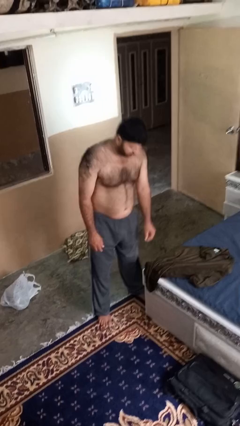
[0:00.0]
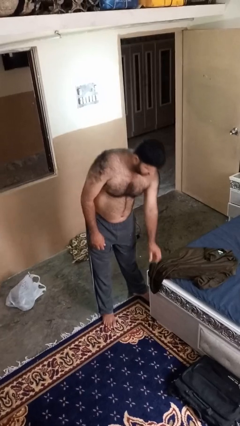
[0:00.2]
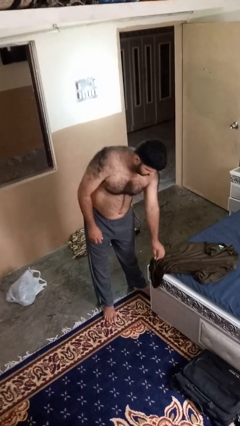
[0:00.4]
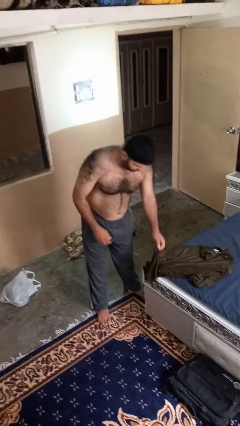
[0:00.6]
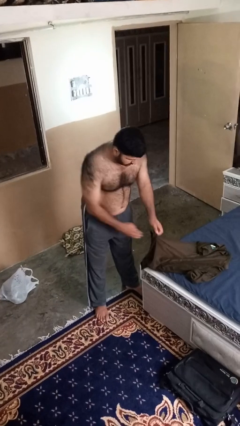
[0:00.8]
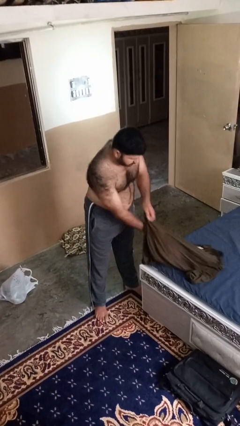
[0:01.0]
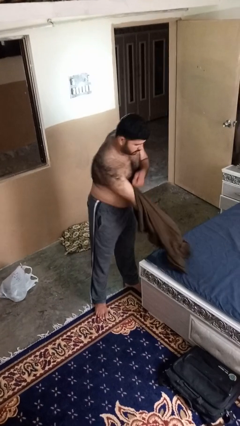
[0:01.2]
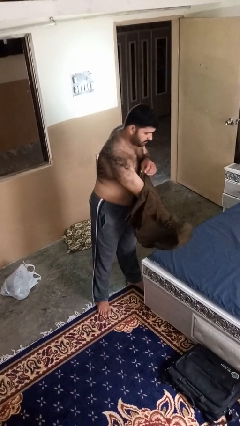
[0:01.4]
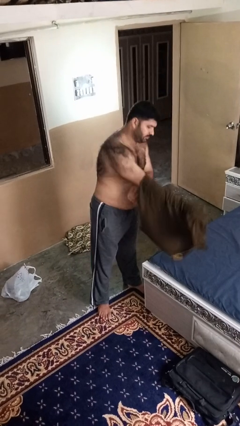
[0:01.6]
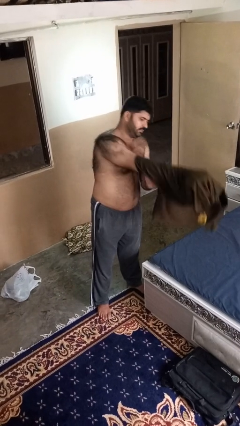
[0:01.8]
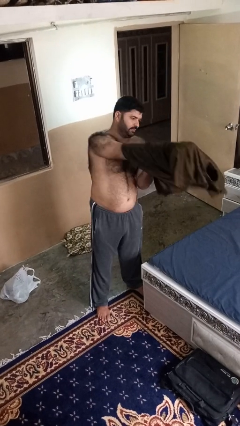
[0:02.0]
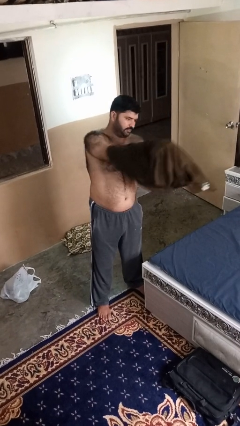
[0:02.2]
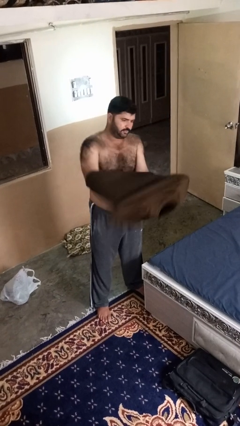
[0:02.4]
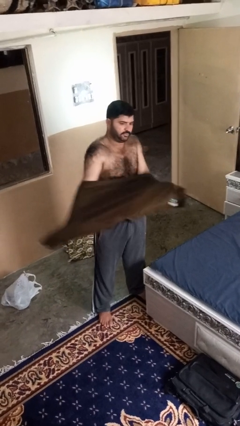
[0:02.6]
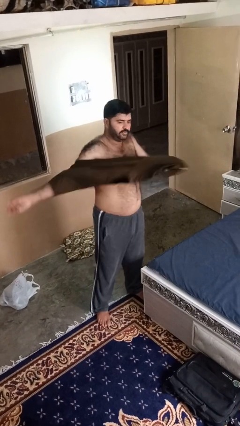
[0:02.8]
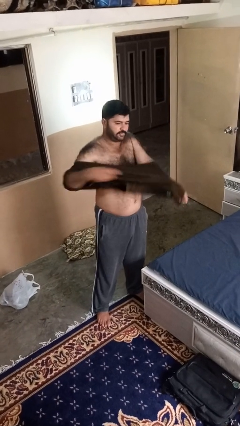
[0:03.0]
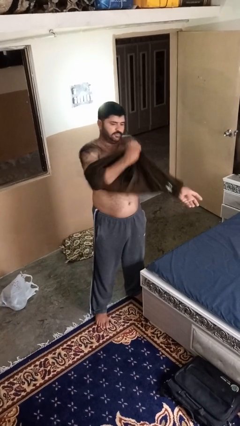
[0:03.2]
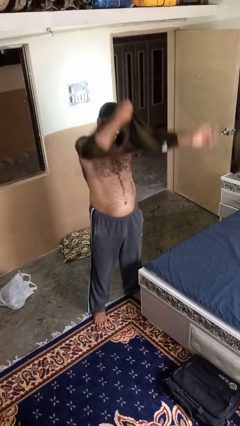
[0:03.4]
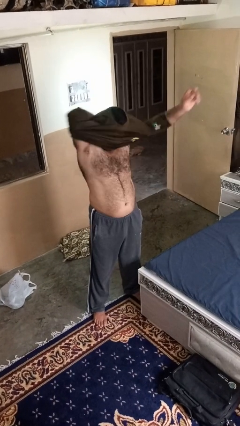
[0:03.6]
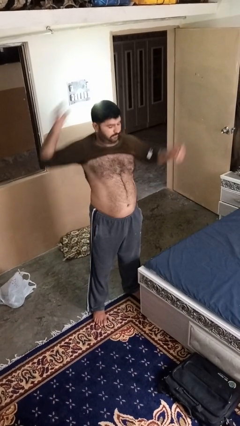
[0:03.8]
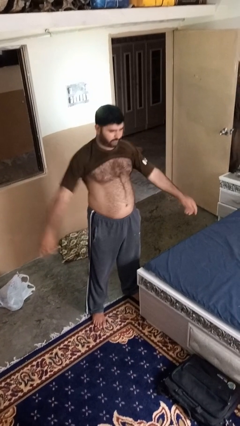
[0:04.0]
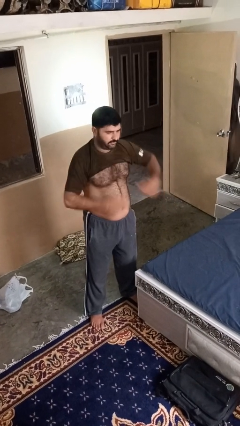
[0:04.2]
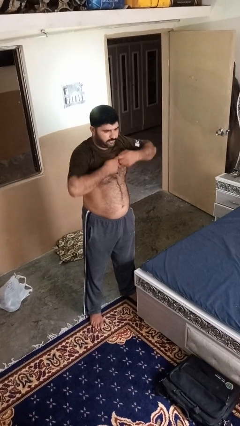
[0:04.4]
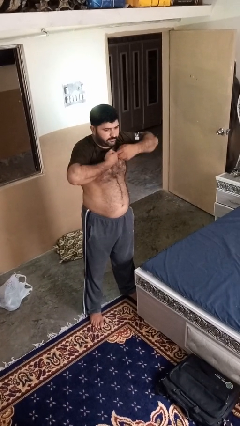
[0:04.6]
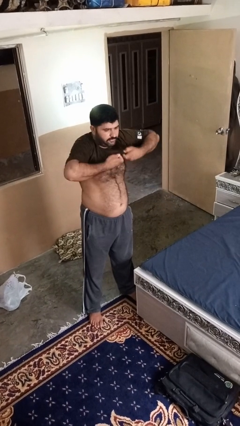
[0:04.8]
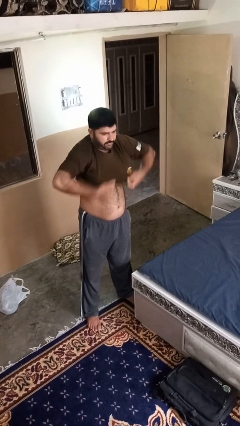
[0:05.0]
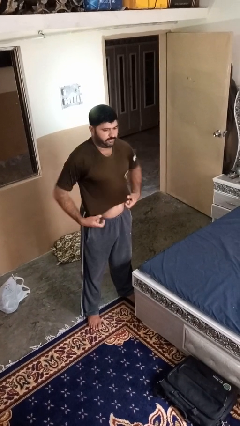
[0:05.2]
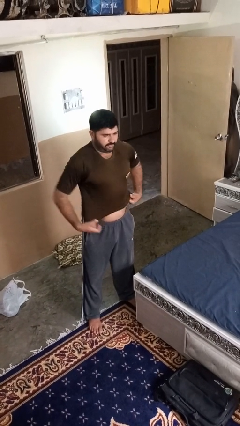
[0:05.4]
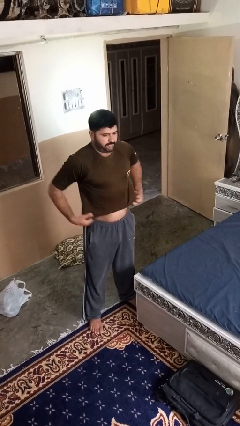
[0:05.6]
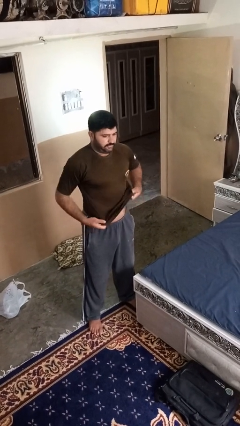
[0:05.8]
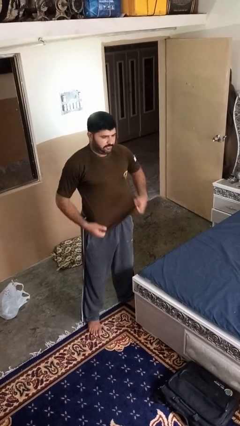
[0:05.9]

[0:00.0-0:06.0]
person puts on shirt

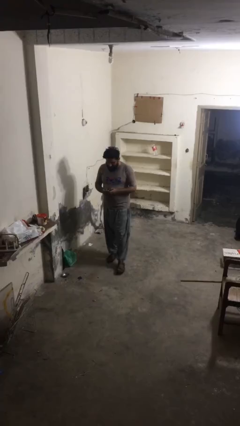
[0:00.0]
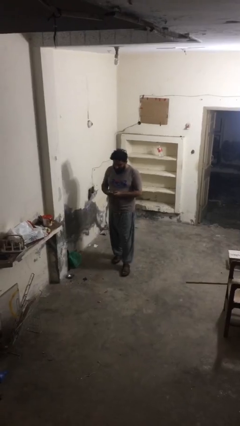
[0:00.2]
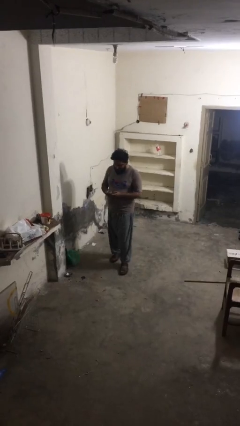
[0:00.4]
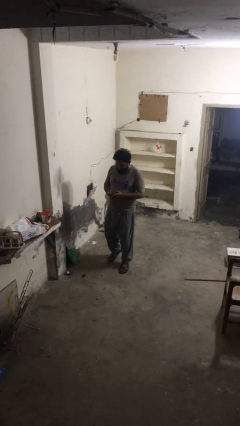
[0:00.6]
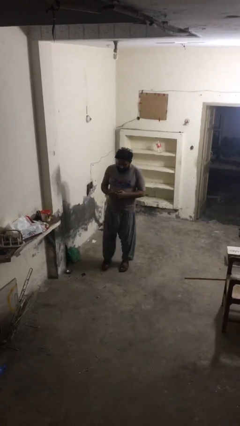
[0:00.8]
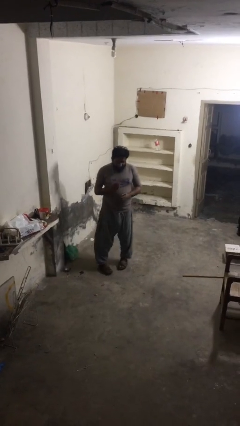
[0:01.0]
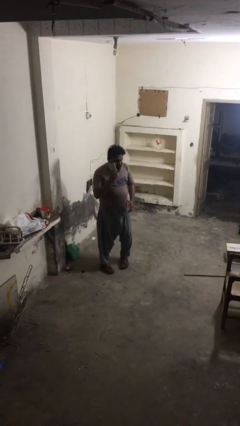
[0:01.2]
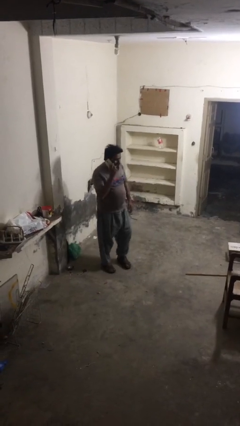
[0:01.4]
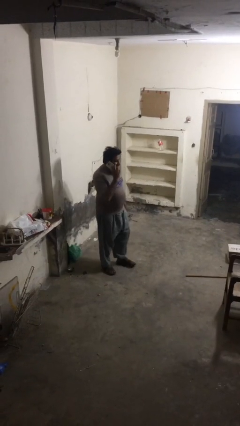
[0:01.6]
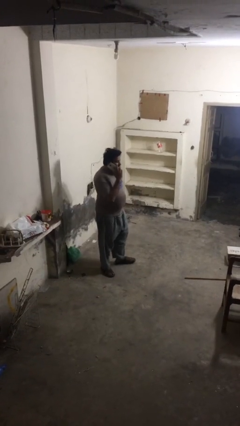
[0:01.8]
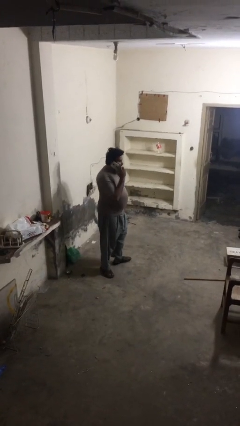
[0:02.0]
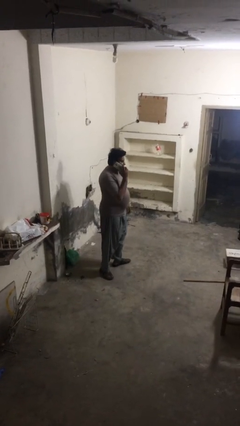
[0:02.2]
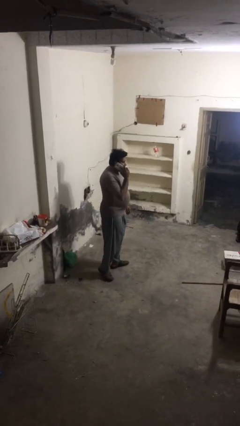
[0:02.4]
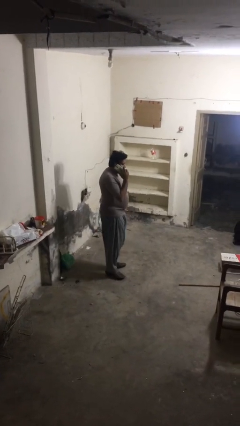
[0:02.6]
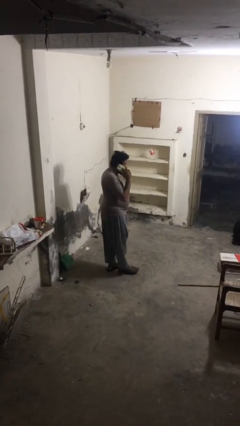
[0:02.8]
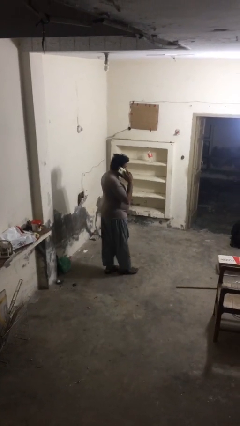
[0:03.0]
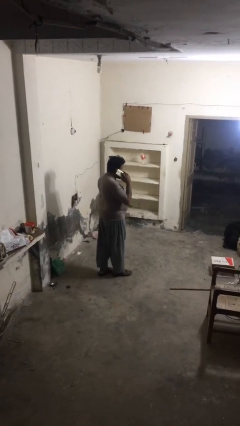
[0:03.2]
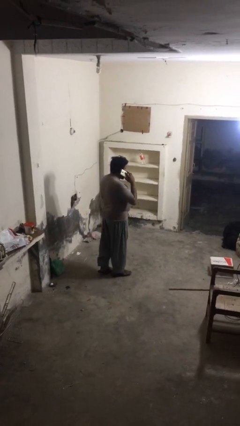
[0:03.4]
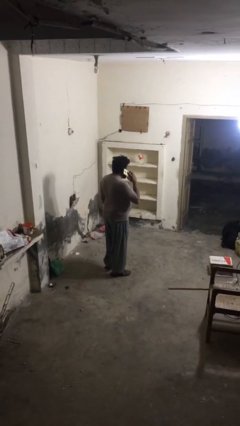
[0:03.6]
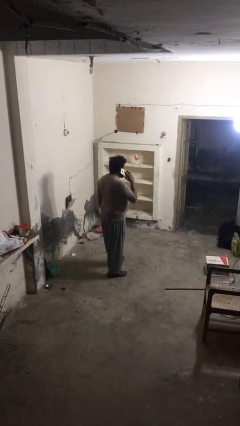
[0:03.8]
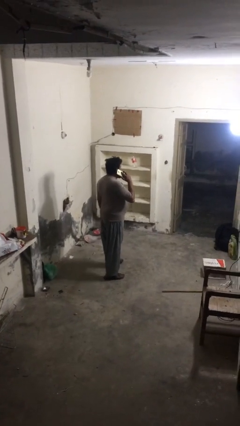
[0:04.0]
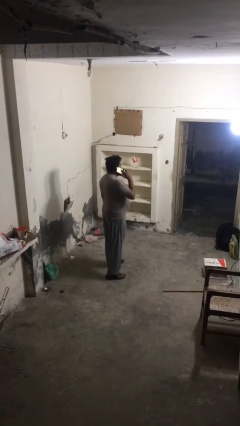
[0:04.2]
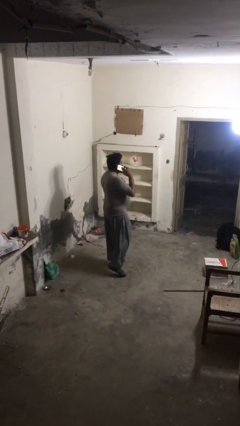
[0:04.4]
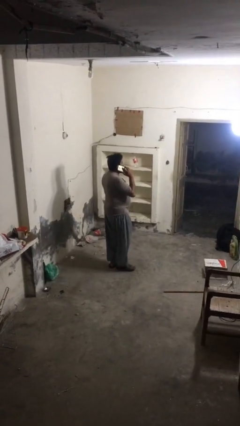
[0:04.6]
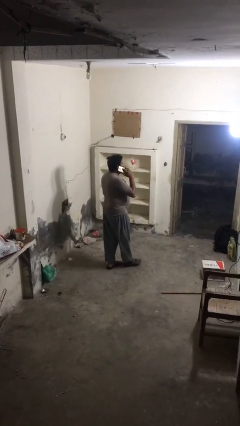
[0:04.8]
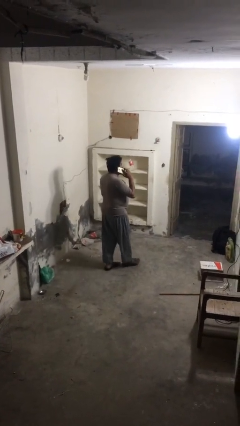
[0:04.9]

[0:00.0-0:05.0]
person talks on phone

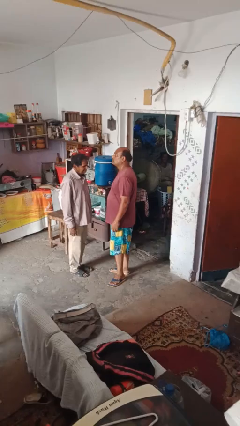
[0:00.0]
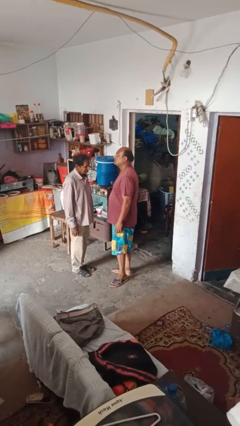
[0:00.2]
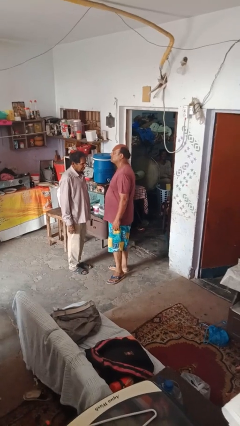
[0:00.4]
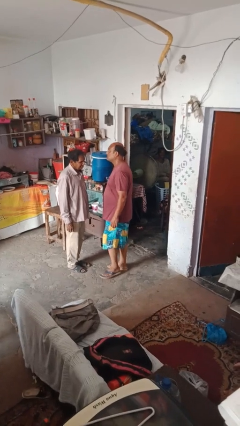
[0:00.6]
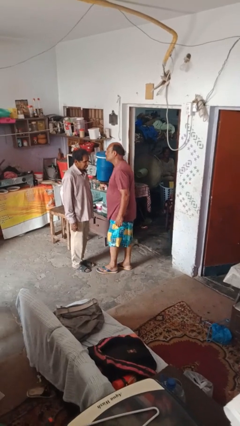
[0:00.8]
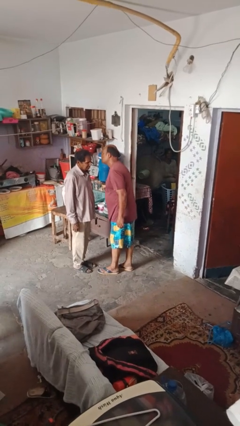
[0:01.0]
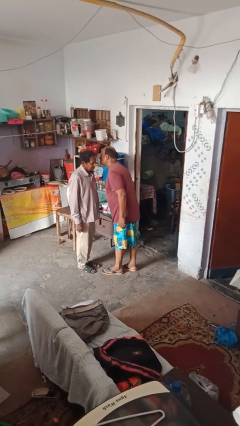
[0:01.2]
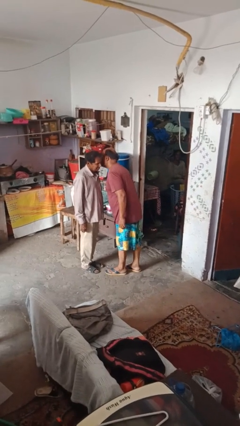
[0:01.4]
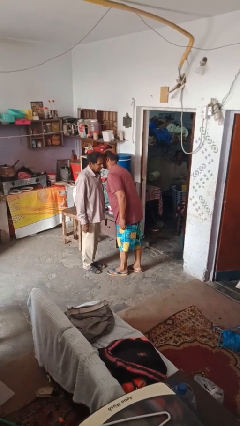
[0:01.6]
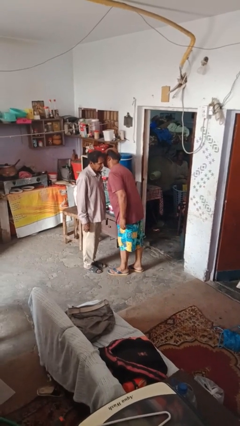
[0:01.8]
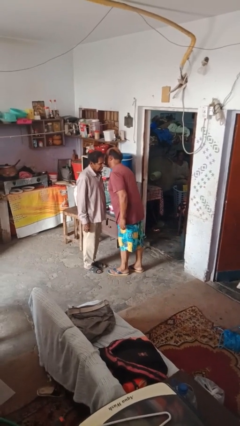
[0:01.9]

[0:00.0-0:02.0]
person kisses cheek of person

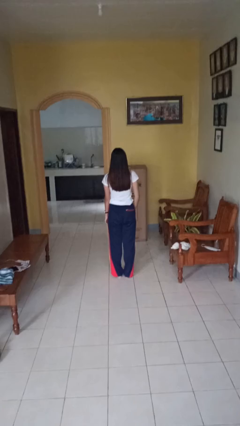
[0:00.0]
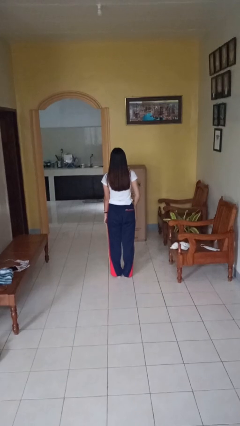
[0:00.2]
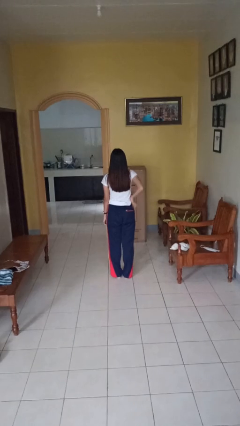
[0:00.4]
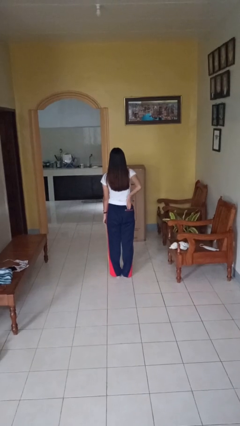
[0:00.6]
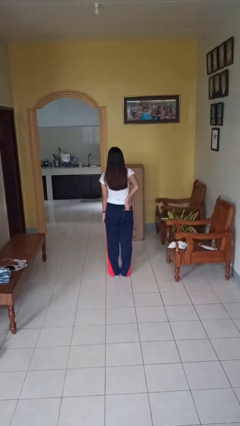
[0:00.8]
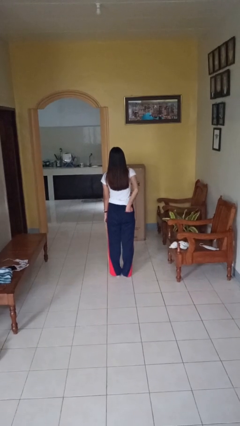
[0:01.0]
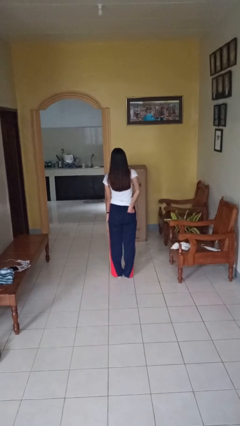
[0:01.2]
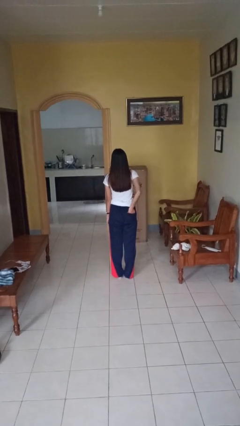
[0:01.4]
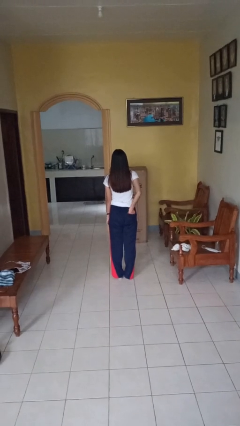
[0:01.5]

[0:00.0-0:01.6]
person puts hands in back pockets

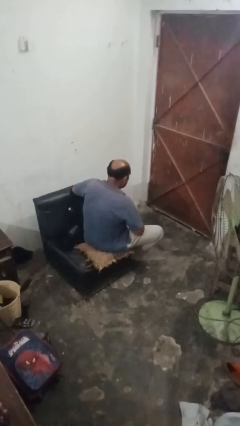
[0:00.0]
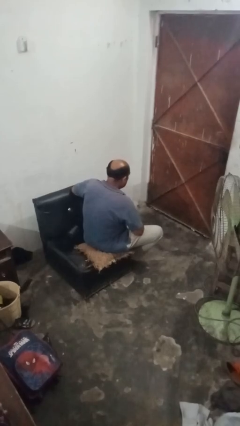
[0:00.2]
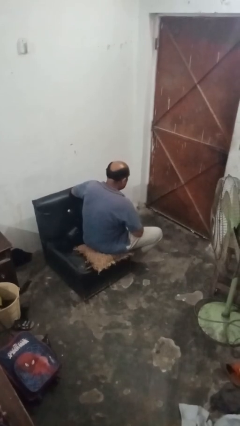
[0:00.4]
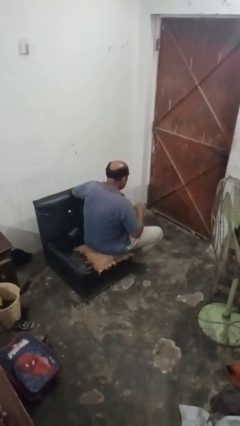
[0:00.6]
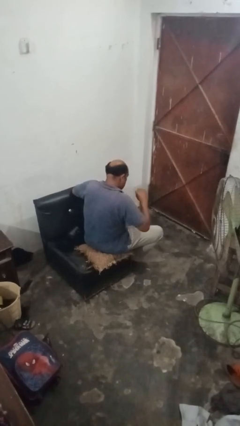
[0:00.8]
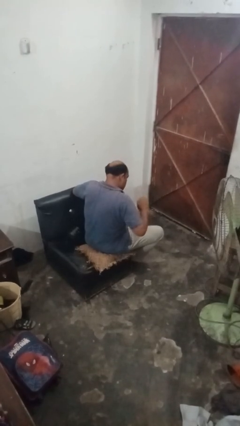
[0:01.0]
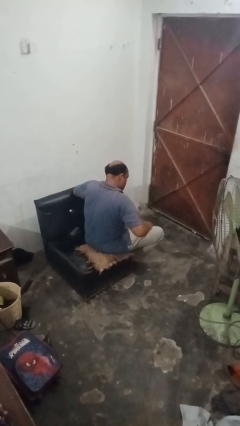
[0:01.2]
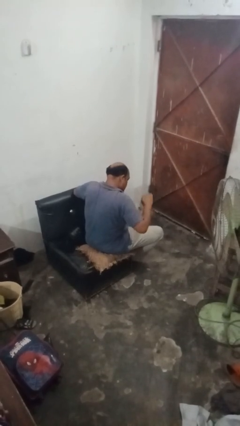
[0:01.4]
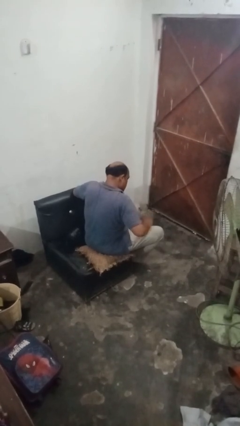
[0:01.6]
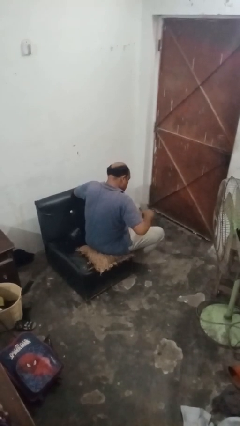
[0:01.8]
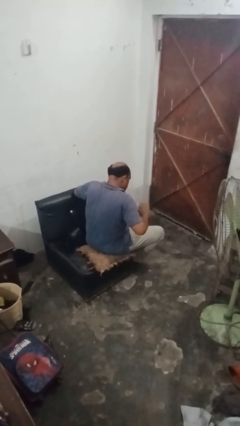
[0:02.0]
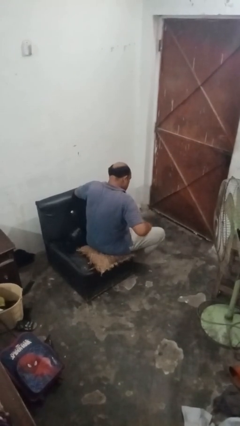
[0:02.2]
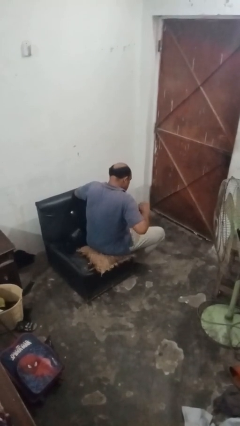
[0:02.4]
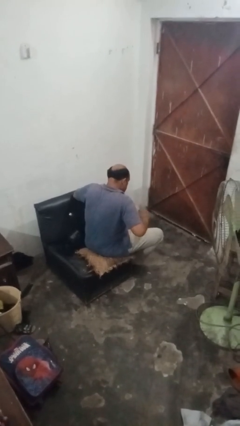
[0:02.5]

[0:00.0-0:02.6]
person slaps hands on thighs
